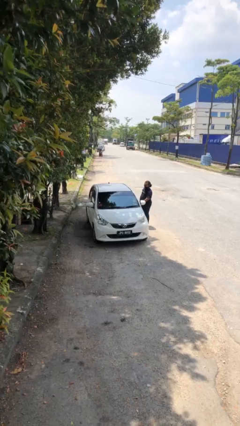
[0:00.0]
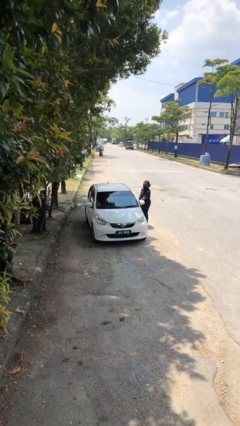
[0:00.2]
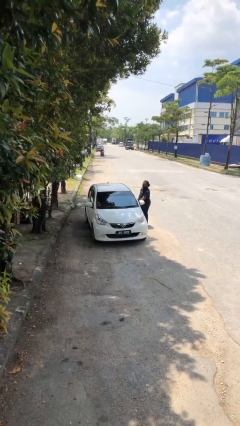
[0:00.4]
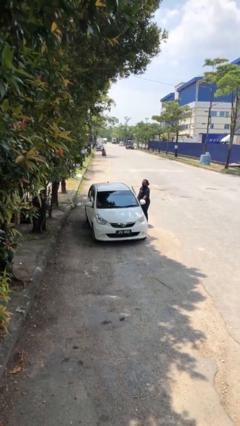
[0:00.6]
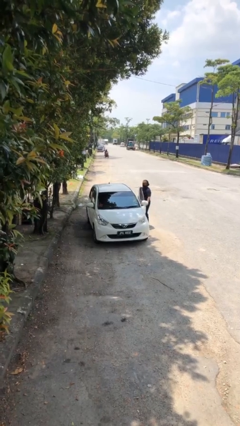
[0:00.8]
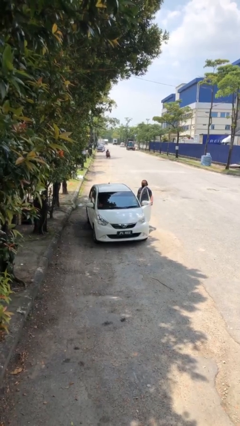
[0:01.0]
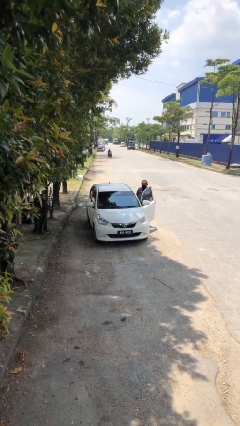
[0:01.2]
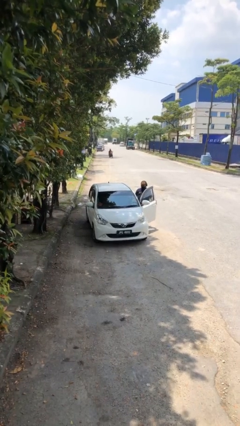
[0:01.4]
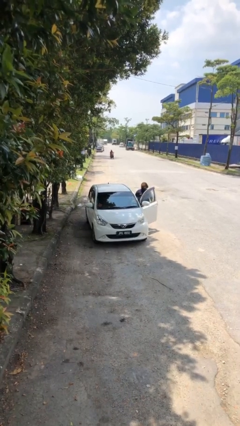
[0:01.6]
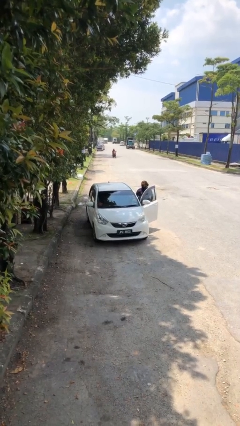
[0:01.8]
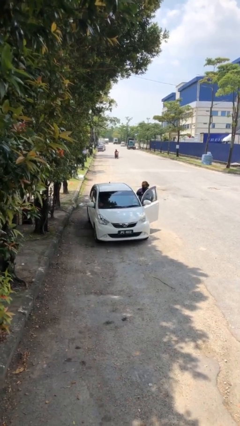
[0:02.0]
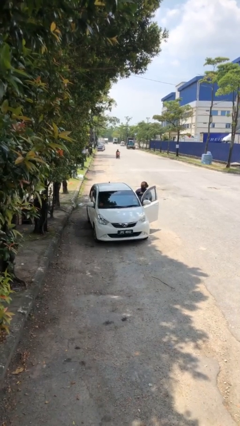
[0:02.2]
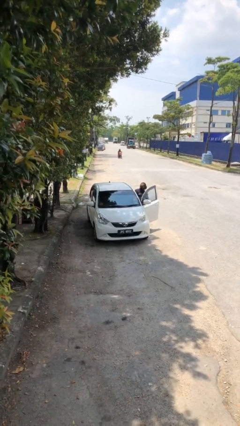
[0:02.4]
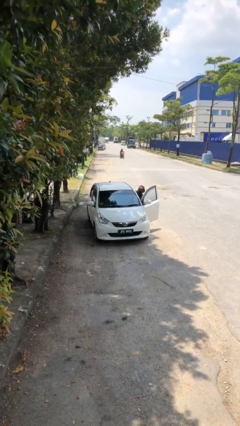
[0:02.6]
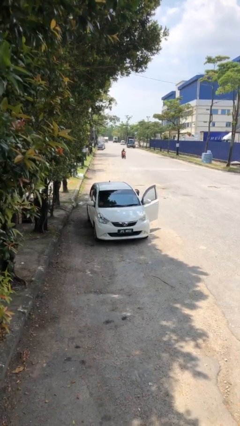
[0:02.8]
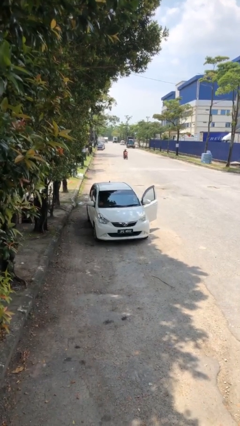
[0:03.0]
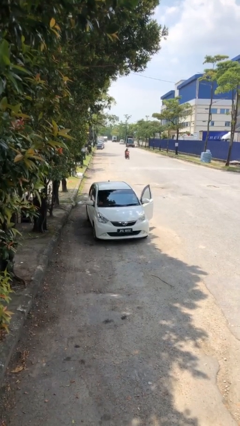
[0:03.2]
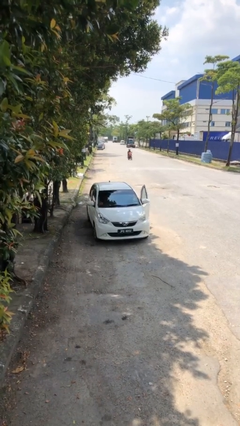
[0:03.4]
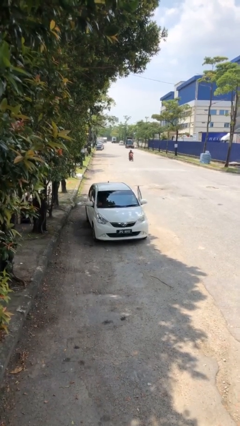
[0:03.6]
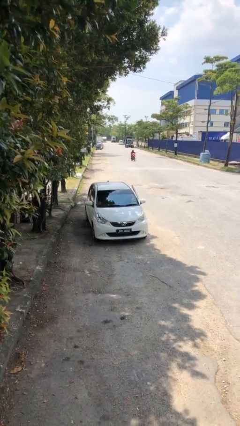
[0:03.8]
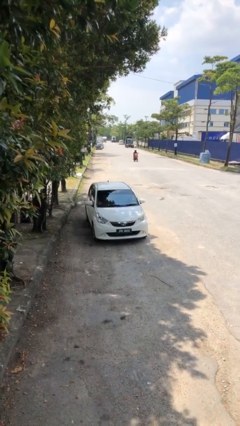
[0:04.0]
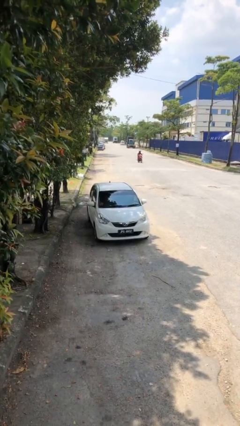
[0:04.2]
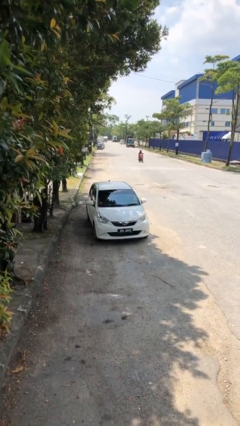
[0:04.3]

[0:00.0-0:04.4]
car picks up person

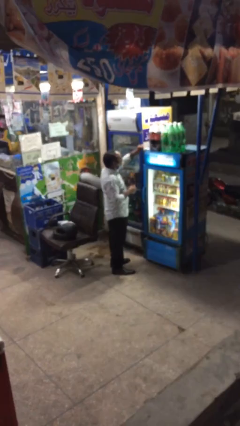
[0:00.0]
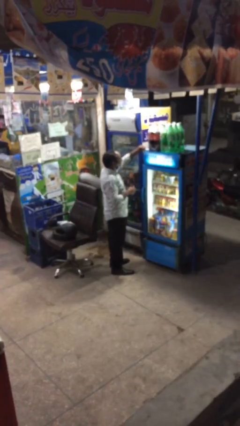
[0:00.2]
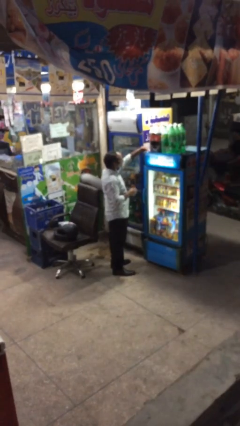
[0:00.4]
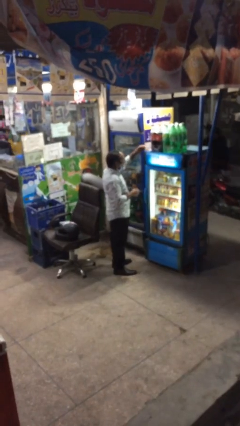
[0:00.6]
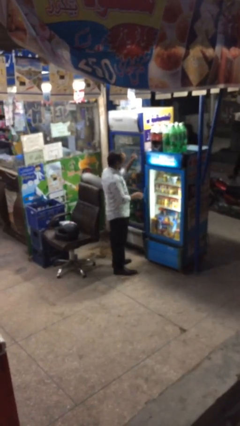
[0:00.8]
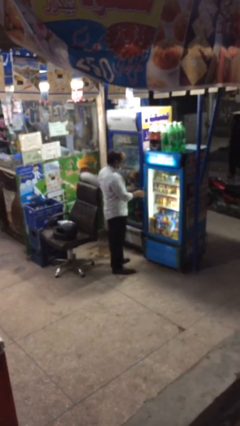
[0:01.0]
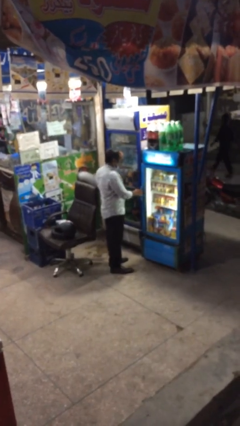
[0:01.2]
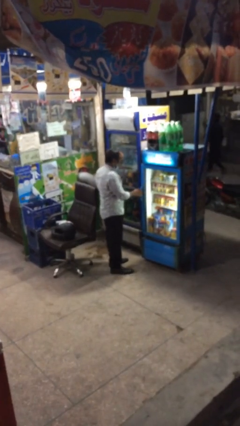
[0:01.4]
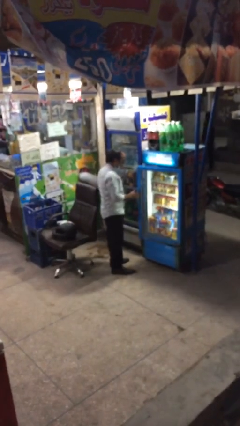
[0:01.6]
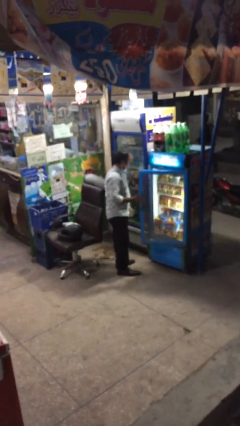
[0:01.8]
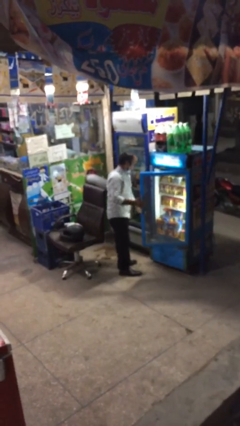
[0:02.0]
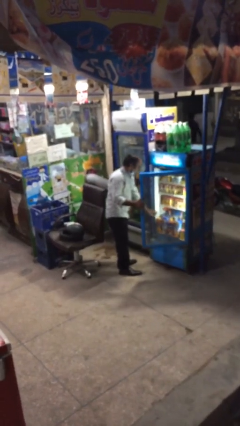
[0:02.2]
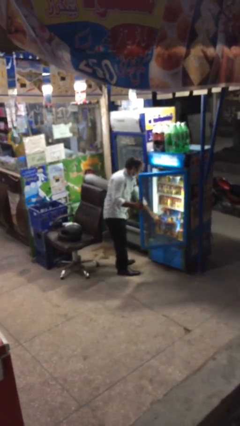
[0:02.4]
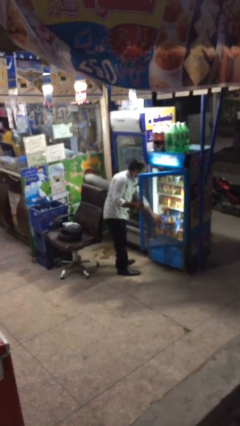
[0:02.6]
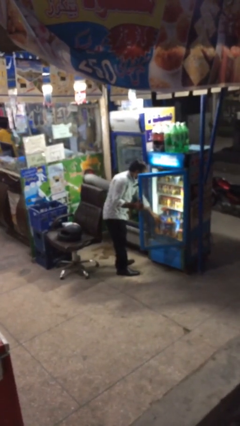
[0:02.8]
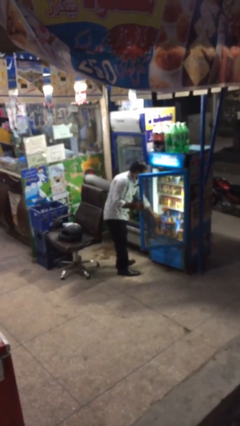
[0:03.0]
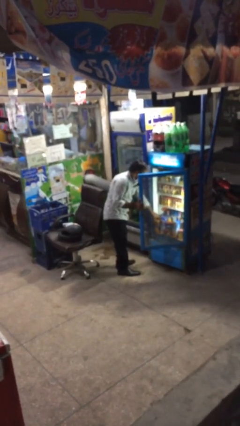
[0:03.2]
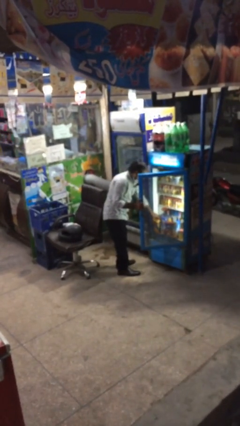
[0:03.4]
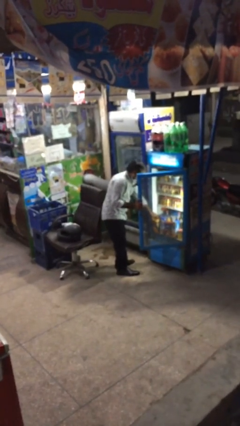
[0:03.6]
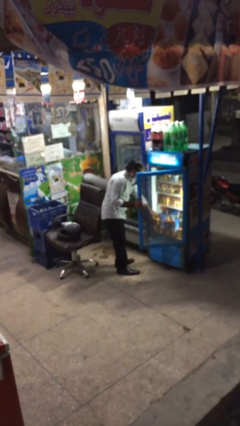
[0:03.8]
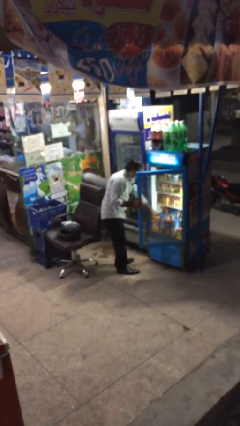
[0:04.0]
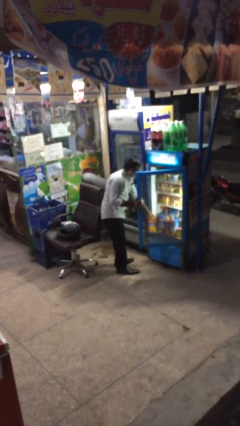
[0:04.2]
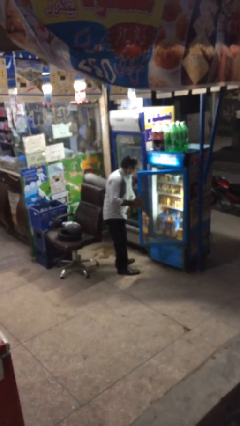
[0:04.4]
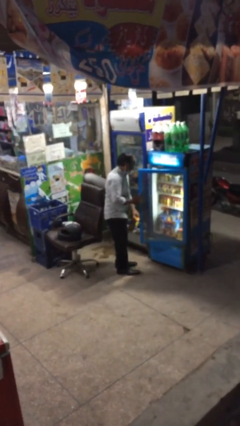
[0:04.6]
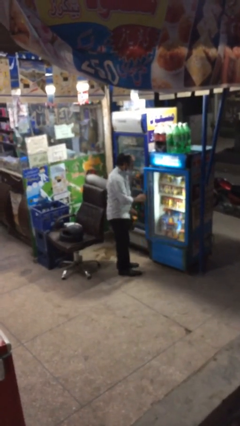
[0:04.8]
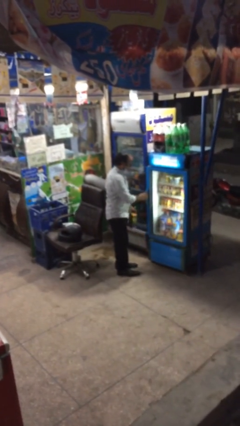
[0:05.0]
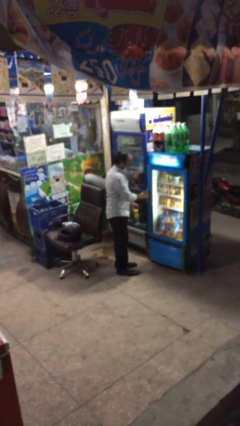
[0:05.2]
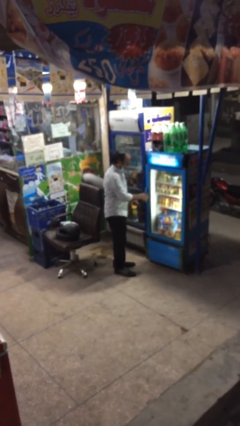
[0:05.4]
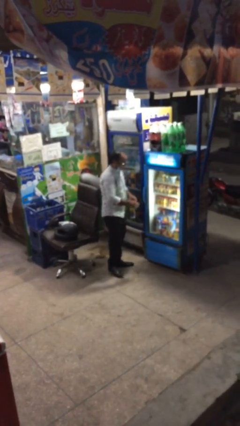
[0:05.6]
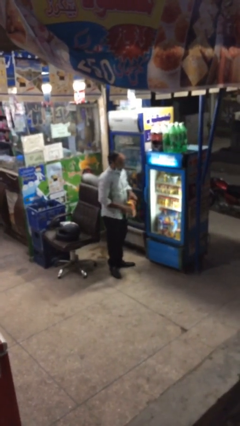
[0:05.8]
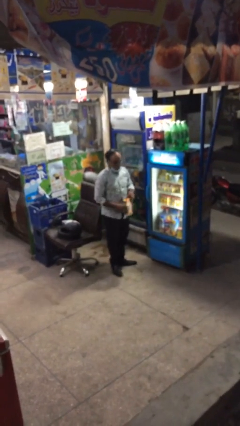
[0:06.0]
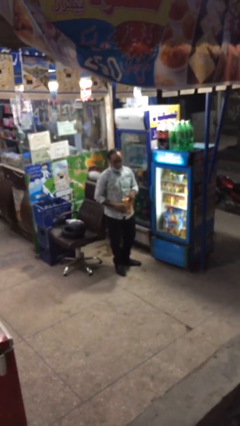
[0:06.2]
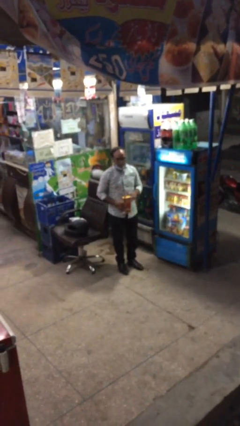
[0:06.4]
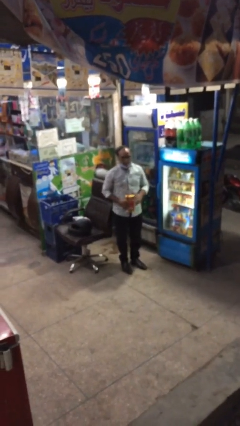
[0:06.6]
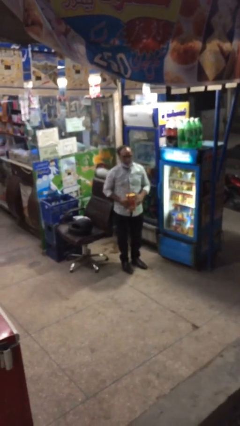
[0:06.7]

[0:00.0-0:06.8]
person purchases from machine

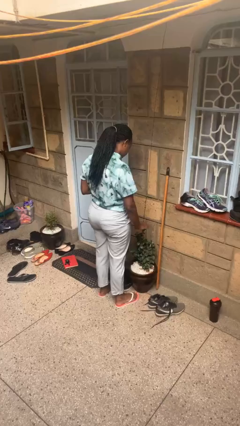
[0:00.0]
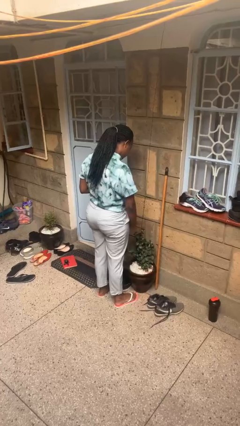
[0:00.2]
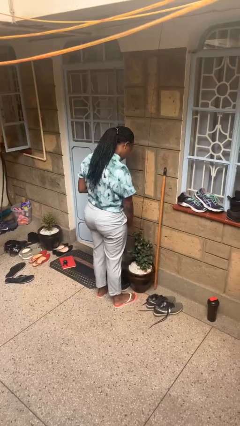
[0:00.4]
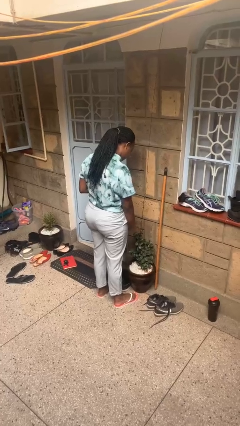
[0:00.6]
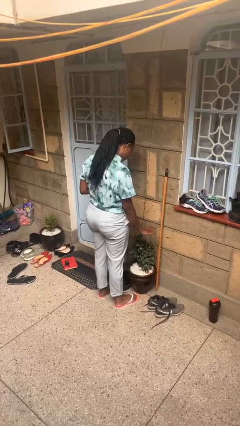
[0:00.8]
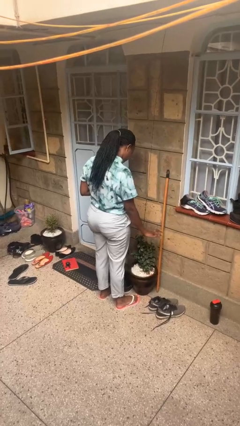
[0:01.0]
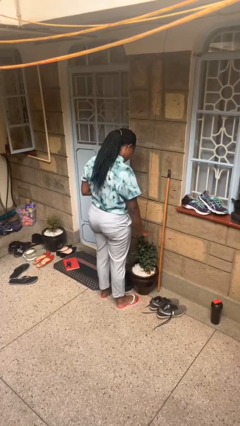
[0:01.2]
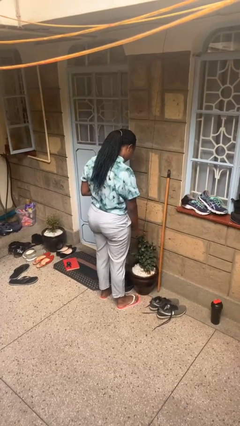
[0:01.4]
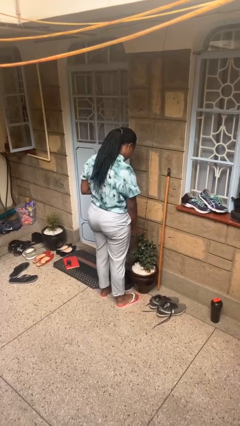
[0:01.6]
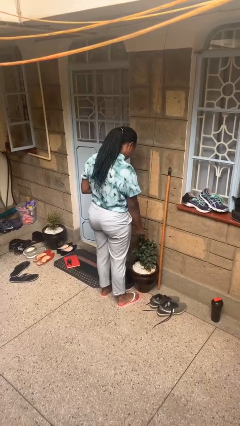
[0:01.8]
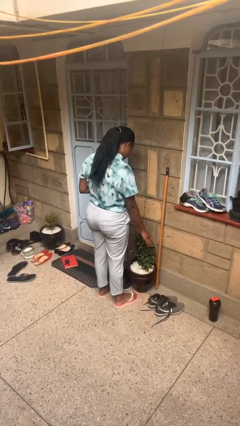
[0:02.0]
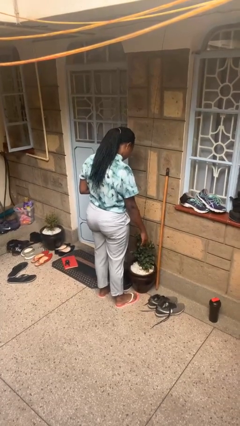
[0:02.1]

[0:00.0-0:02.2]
person waves hand over object

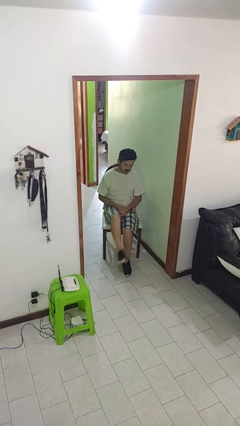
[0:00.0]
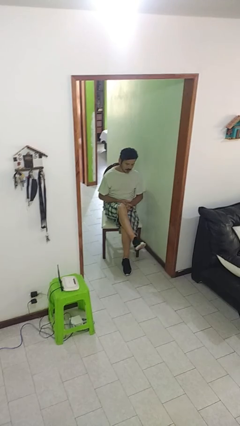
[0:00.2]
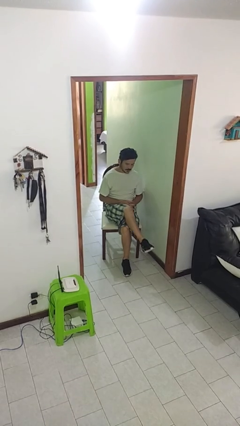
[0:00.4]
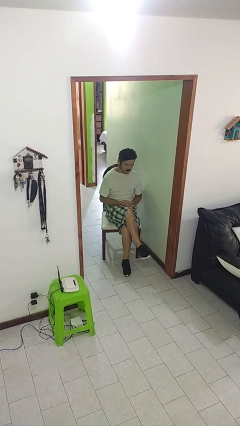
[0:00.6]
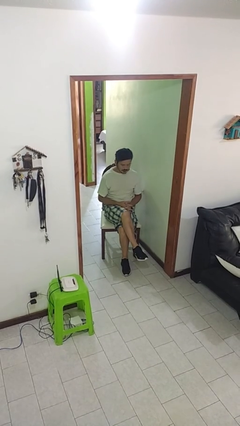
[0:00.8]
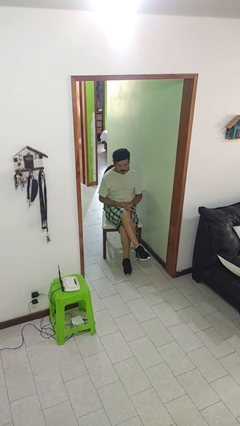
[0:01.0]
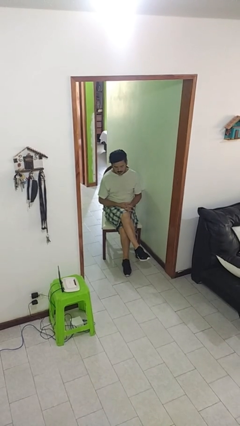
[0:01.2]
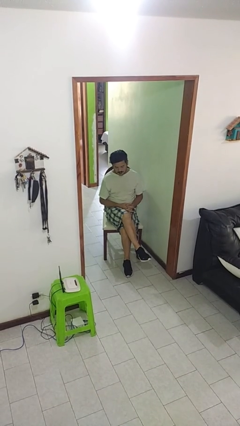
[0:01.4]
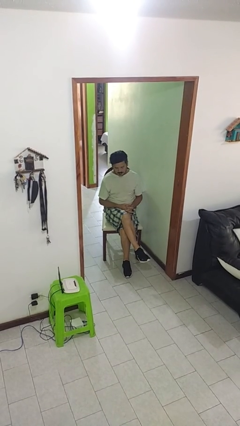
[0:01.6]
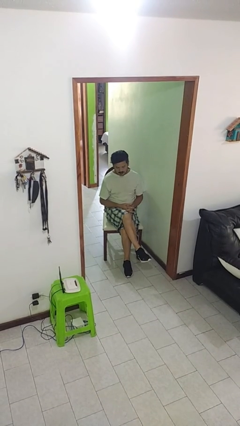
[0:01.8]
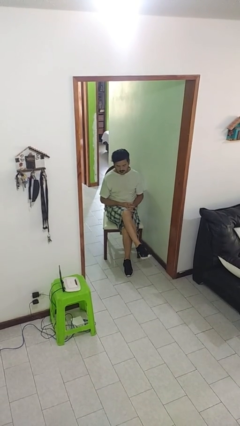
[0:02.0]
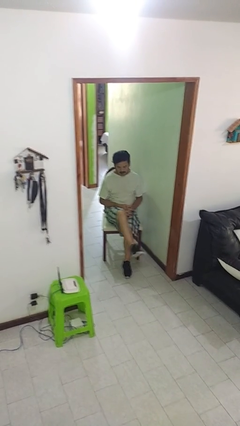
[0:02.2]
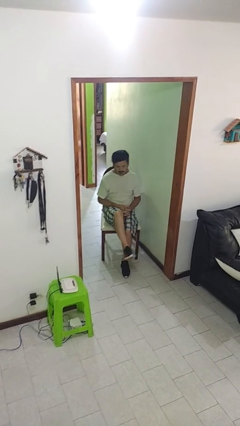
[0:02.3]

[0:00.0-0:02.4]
person crosses legs

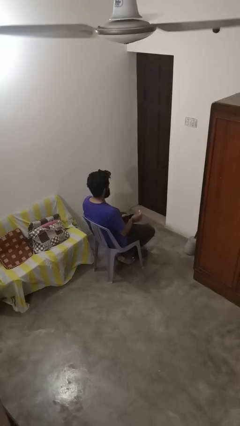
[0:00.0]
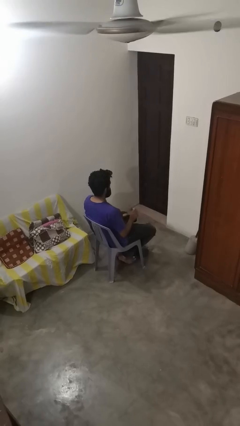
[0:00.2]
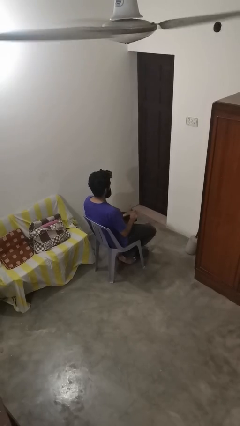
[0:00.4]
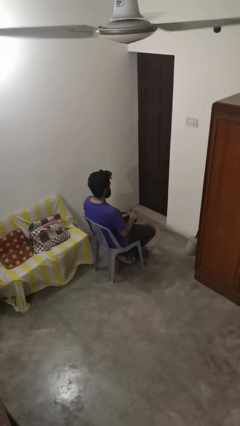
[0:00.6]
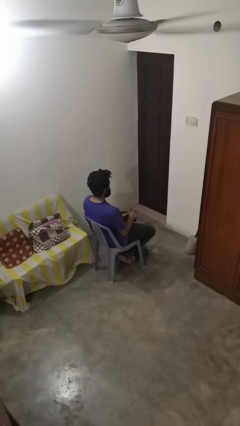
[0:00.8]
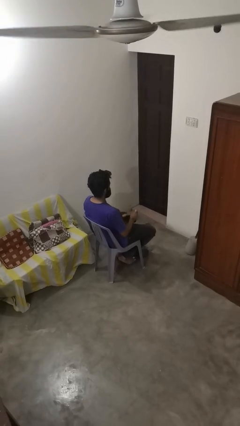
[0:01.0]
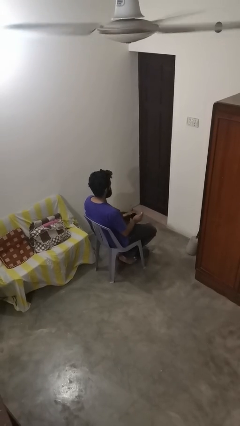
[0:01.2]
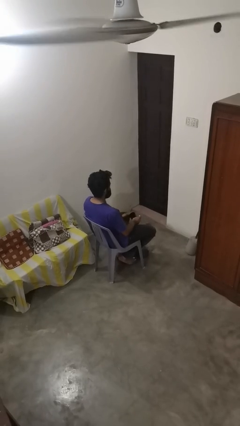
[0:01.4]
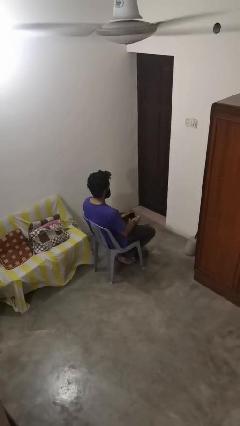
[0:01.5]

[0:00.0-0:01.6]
person stirs mug
